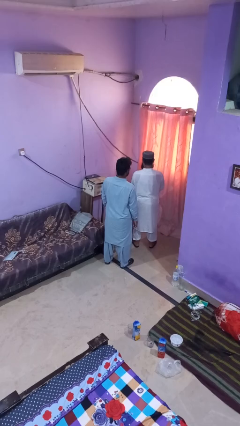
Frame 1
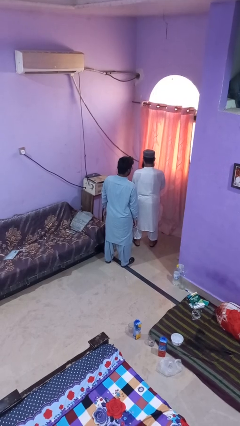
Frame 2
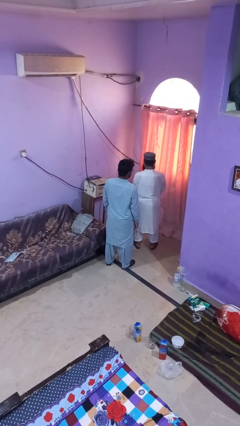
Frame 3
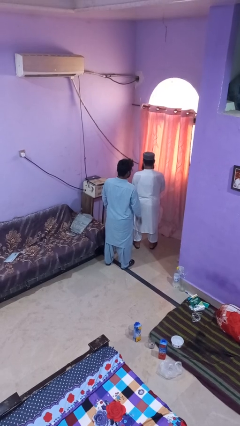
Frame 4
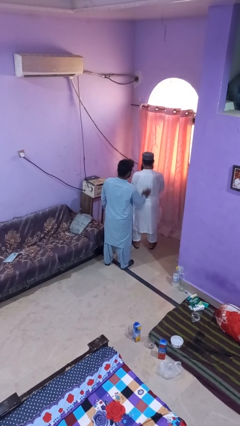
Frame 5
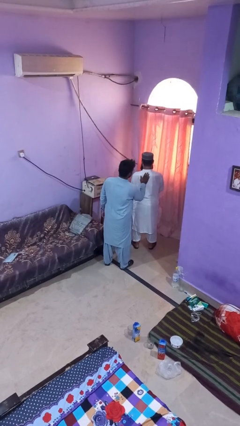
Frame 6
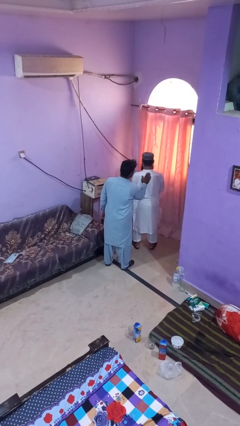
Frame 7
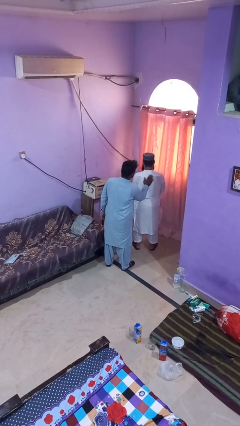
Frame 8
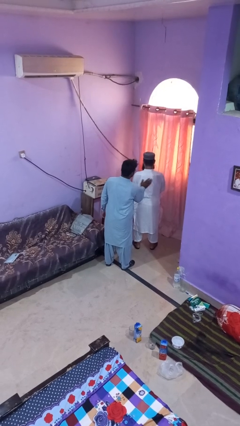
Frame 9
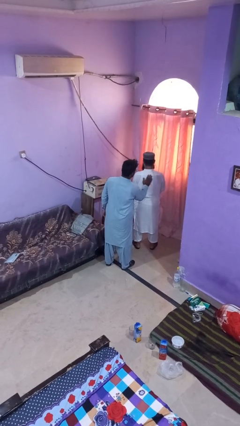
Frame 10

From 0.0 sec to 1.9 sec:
person touches back of person

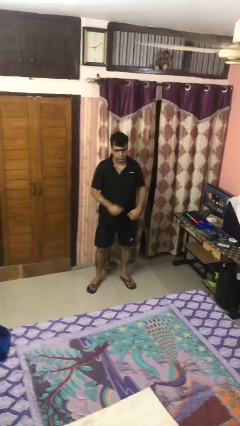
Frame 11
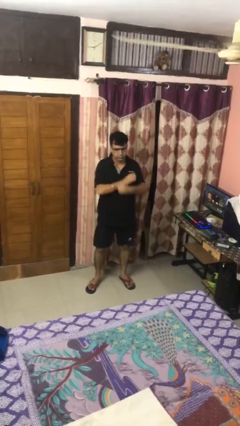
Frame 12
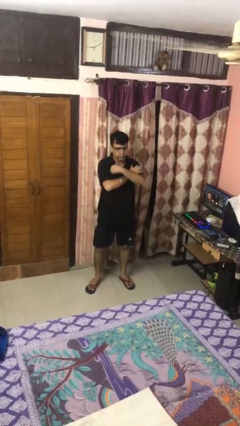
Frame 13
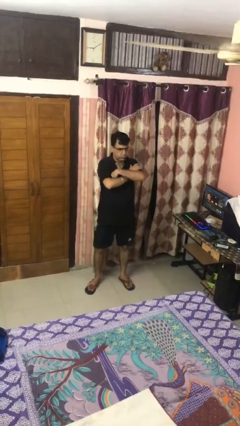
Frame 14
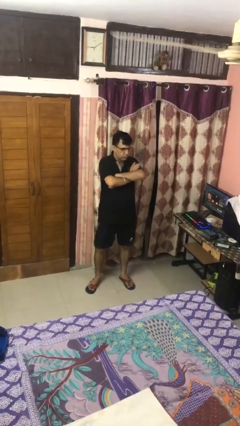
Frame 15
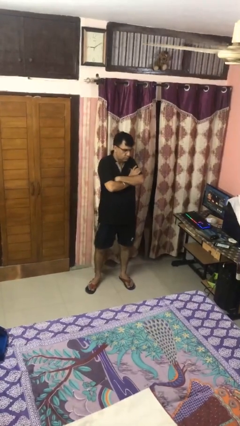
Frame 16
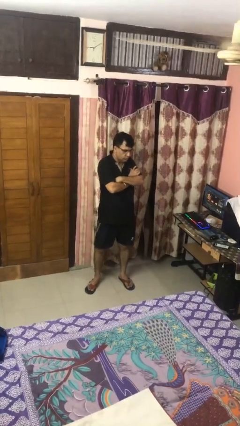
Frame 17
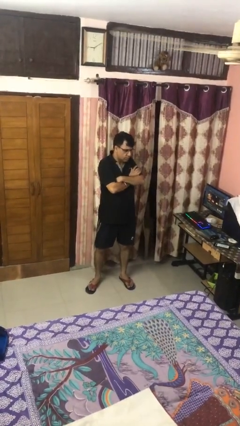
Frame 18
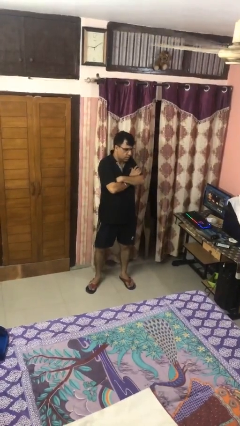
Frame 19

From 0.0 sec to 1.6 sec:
person crosses arms

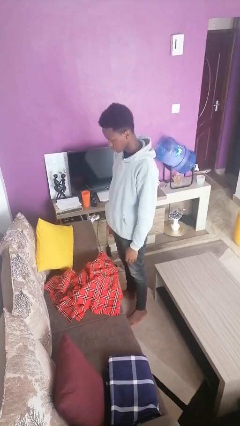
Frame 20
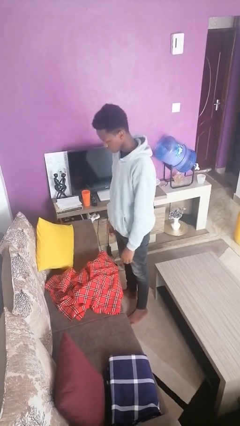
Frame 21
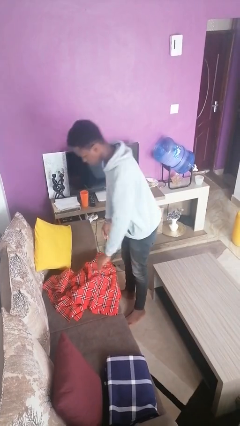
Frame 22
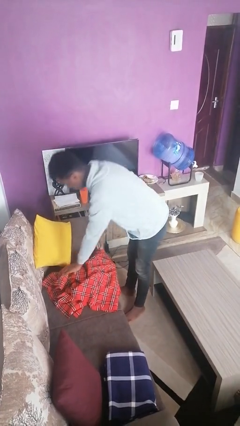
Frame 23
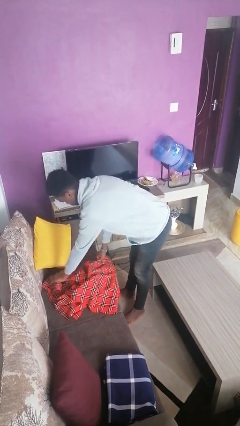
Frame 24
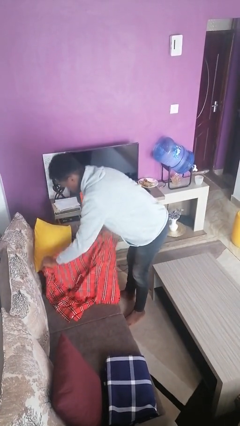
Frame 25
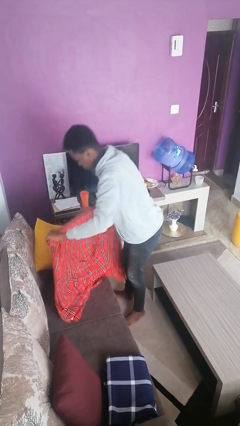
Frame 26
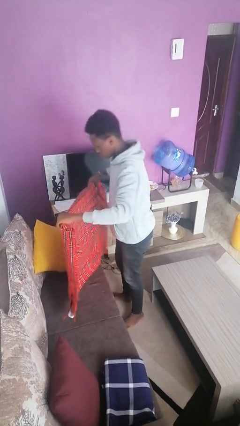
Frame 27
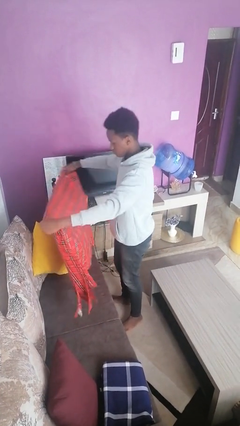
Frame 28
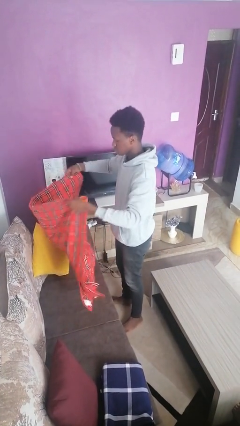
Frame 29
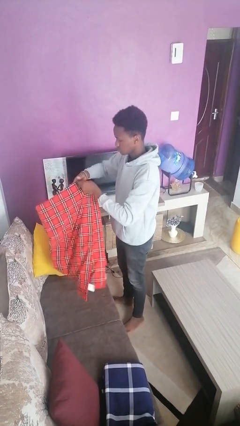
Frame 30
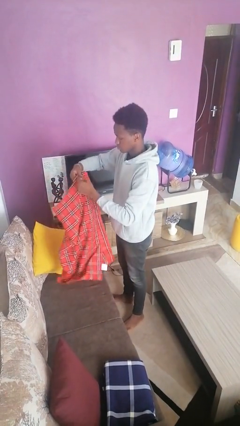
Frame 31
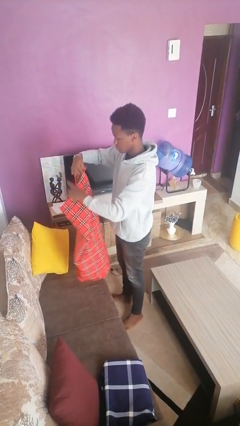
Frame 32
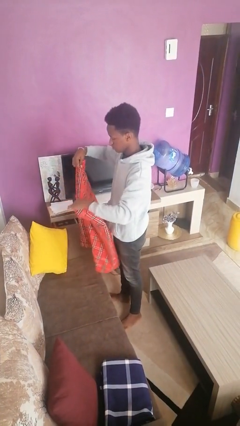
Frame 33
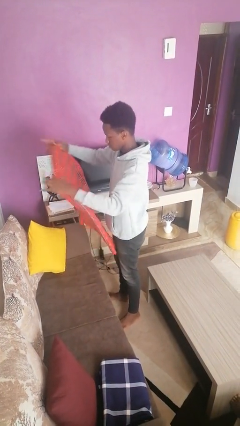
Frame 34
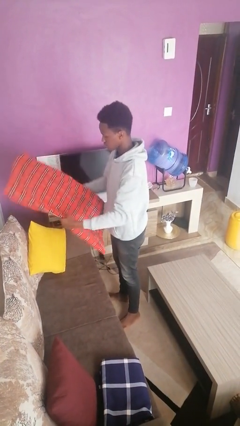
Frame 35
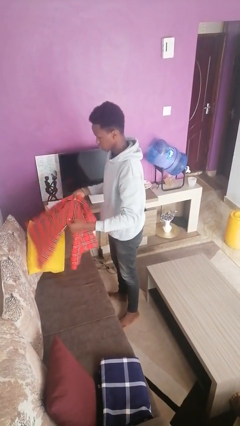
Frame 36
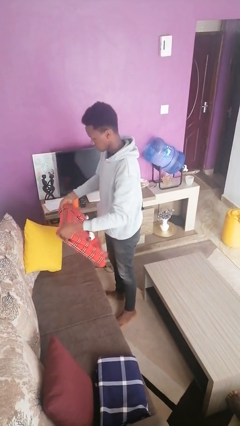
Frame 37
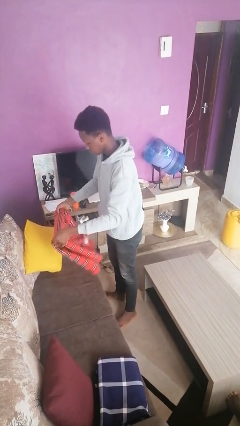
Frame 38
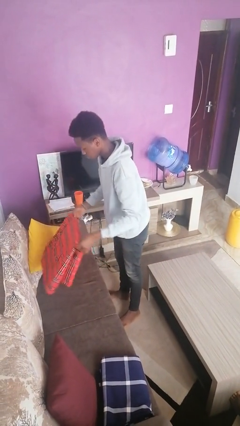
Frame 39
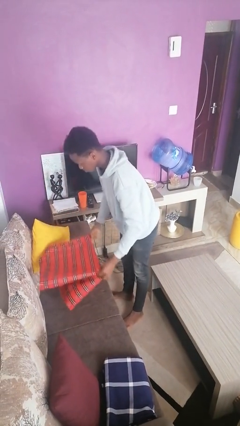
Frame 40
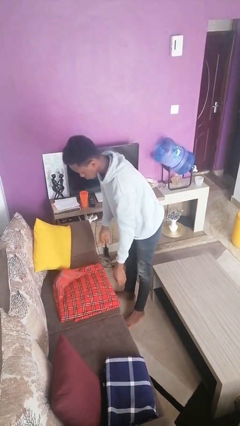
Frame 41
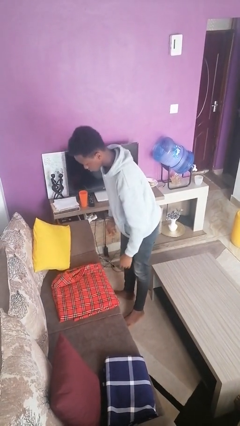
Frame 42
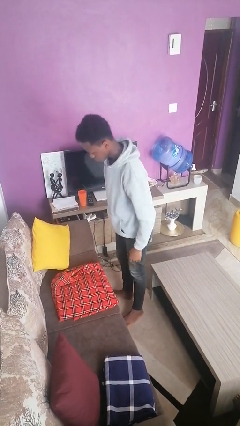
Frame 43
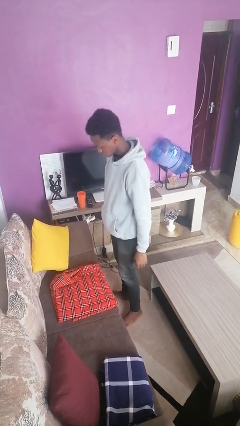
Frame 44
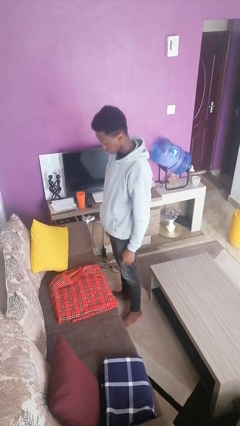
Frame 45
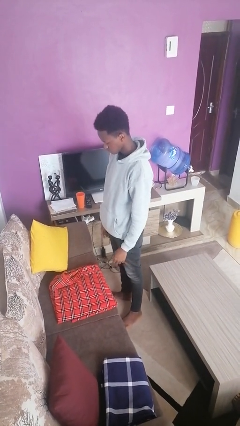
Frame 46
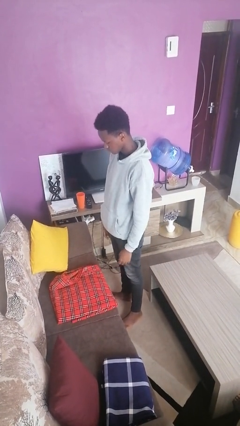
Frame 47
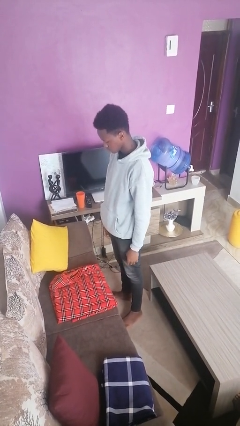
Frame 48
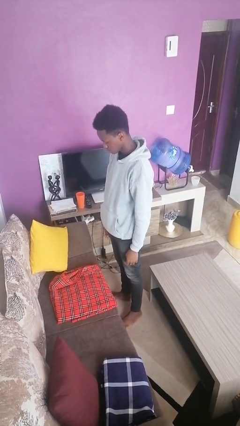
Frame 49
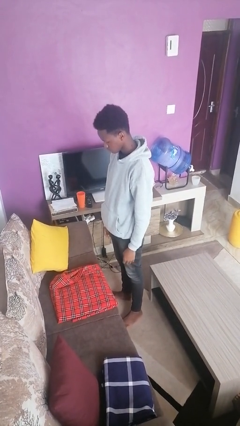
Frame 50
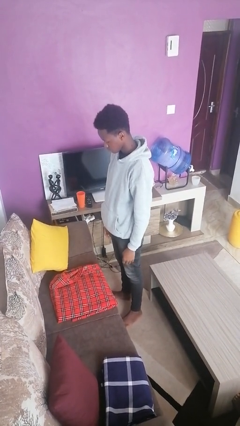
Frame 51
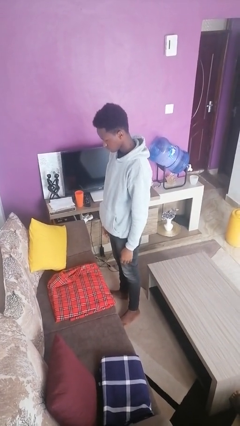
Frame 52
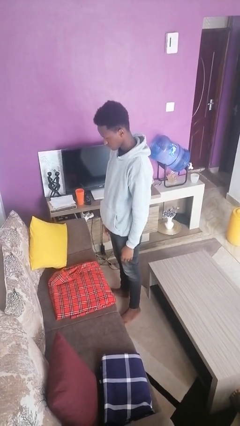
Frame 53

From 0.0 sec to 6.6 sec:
person folds blanket

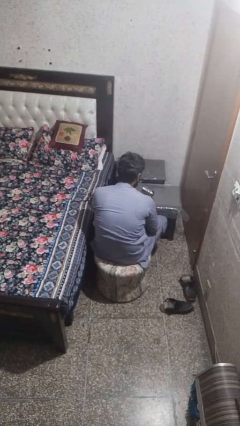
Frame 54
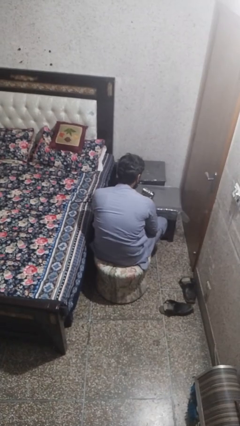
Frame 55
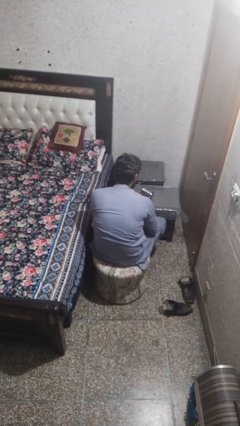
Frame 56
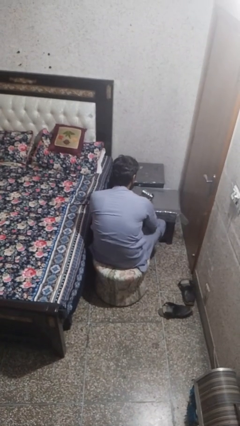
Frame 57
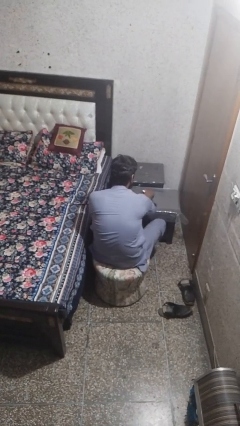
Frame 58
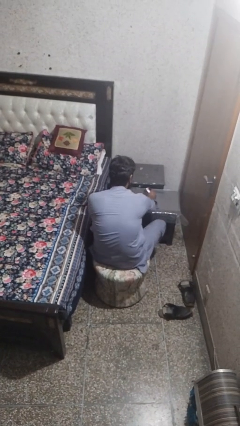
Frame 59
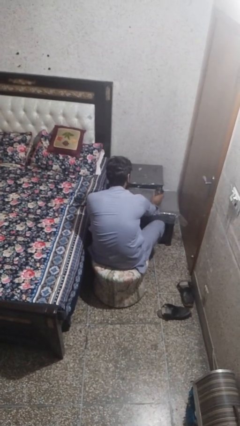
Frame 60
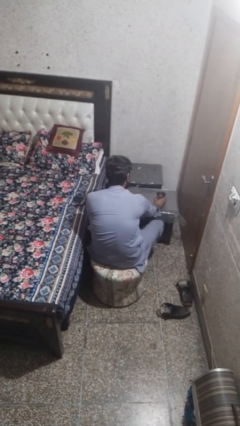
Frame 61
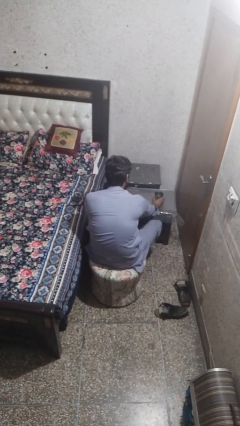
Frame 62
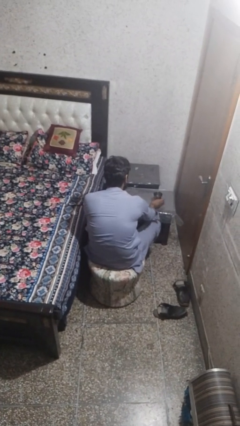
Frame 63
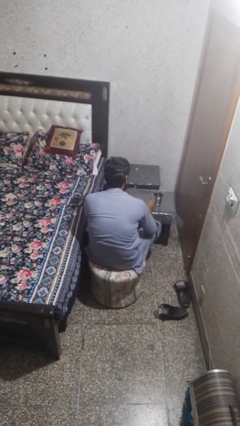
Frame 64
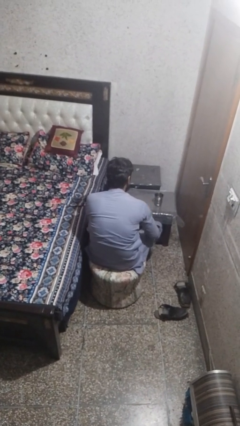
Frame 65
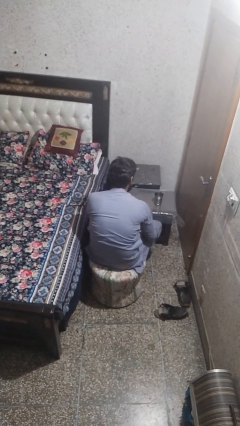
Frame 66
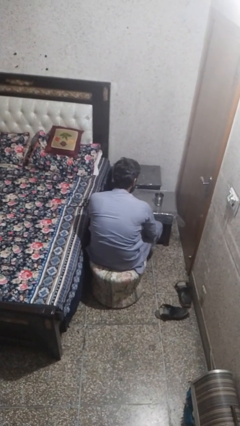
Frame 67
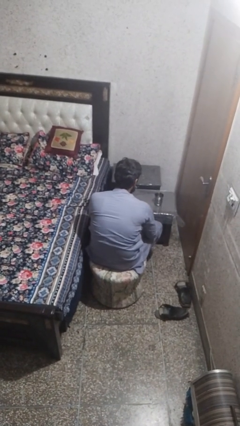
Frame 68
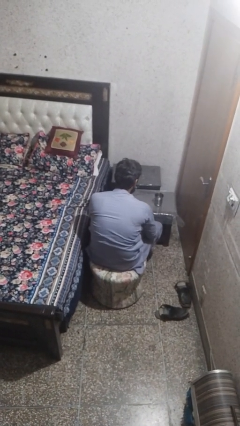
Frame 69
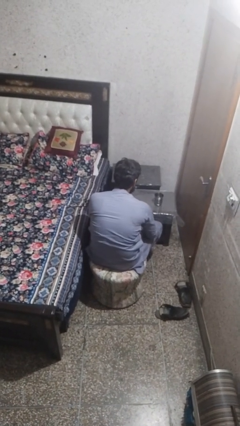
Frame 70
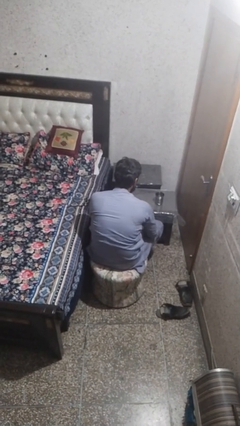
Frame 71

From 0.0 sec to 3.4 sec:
person sets upright glass

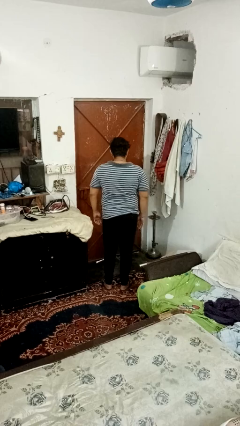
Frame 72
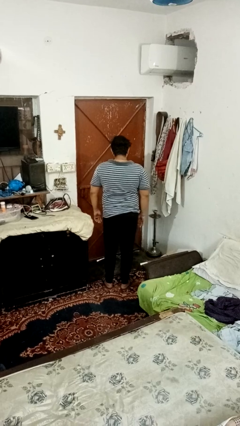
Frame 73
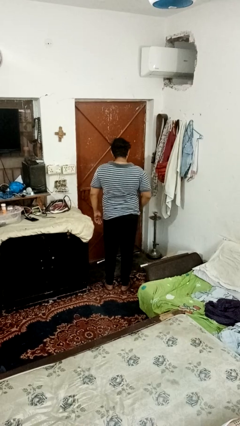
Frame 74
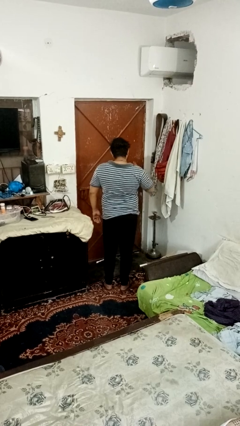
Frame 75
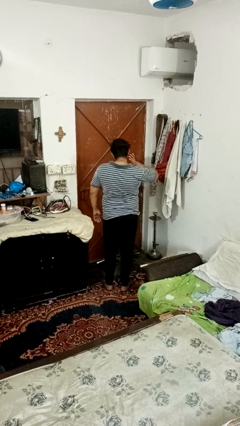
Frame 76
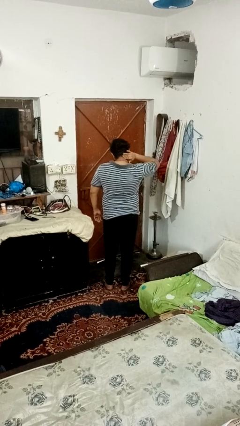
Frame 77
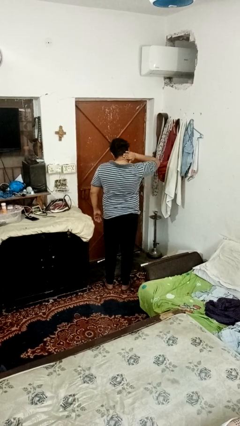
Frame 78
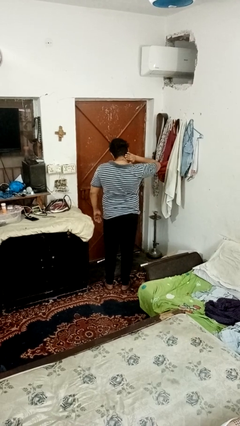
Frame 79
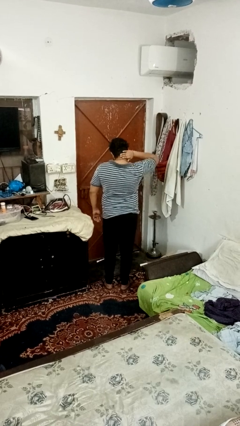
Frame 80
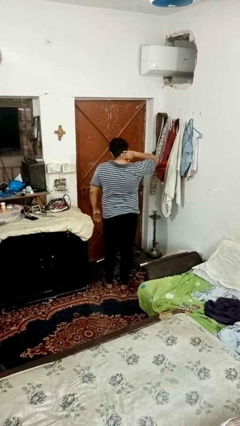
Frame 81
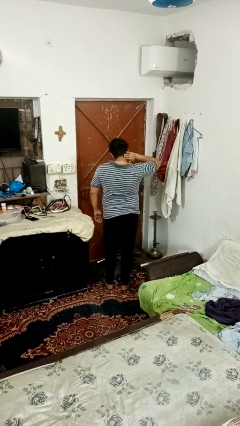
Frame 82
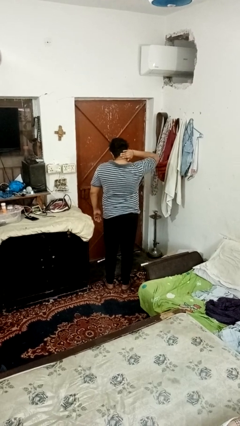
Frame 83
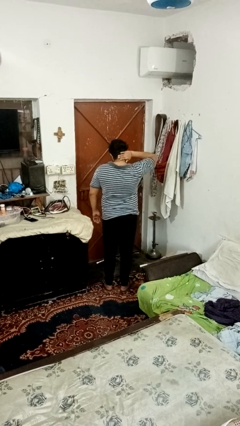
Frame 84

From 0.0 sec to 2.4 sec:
person rubs neck

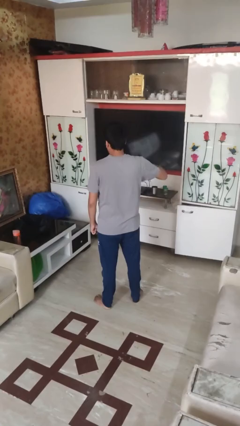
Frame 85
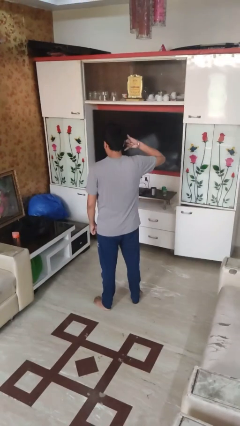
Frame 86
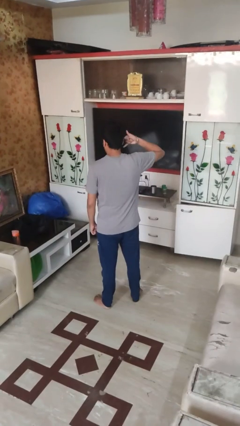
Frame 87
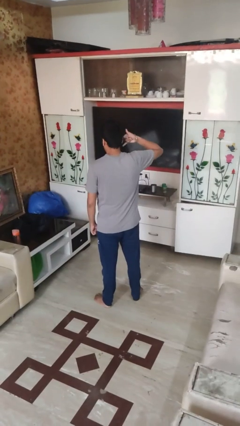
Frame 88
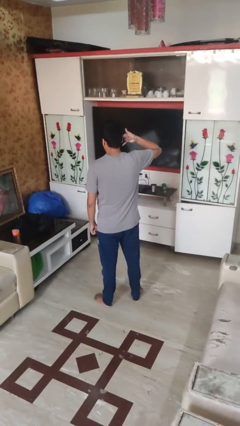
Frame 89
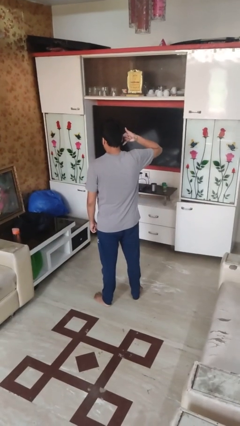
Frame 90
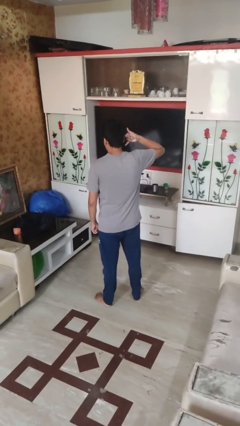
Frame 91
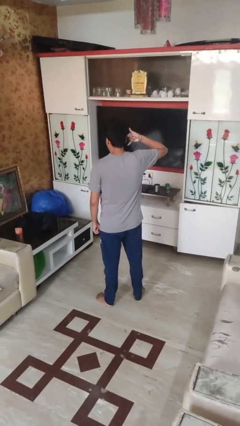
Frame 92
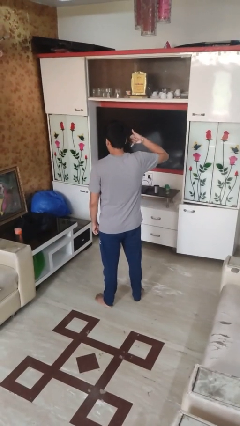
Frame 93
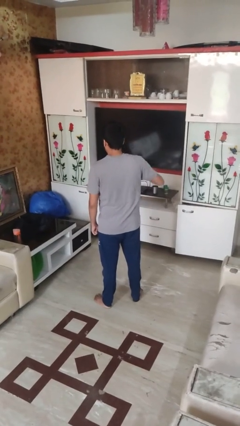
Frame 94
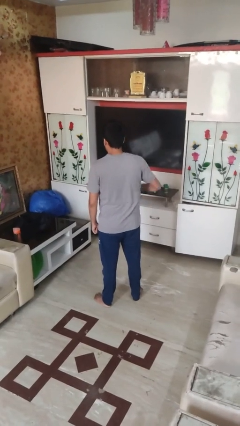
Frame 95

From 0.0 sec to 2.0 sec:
person gestures call me
